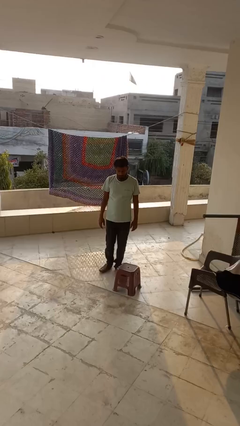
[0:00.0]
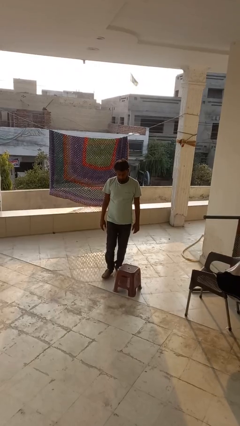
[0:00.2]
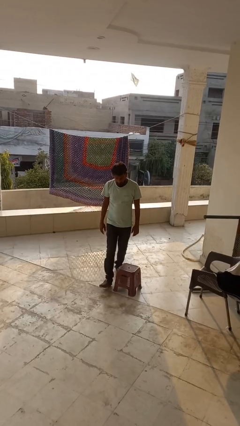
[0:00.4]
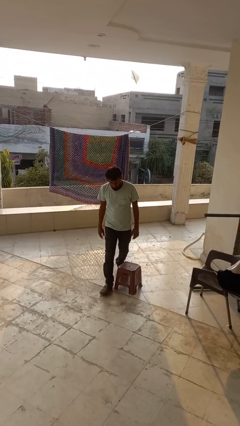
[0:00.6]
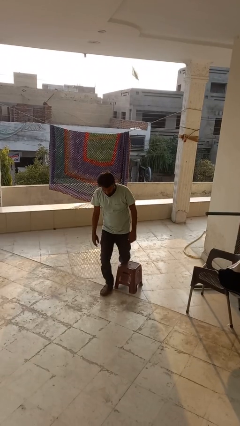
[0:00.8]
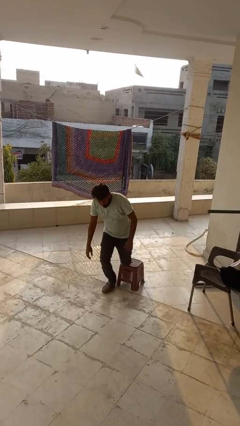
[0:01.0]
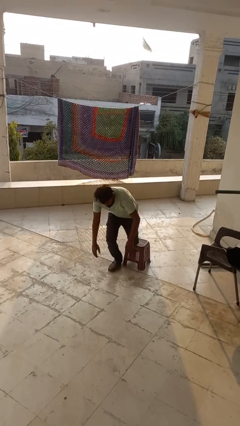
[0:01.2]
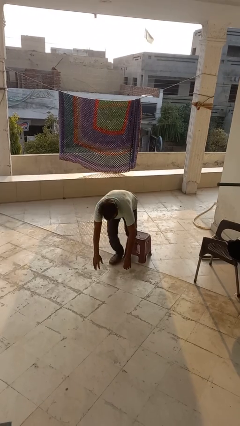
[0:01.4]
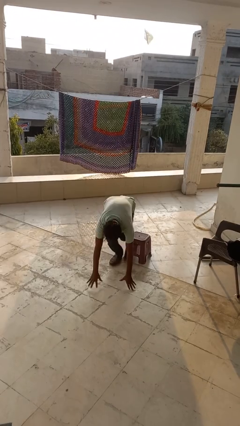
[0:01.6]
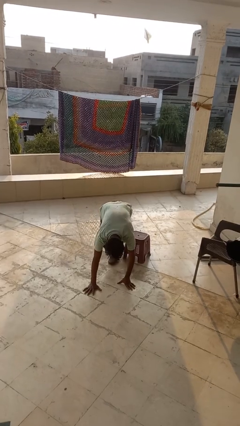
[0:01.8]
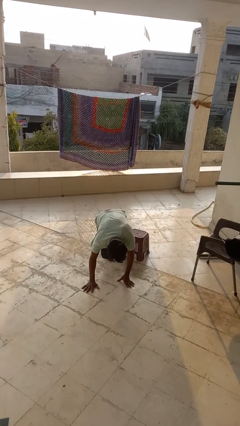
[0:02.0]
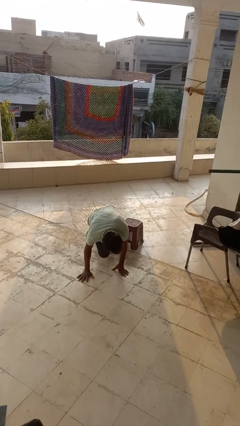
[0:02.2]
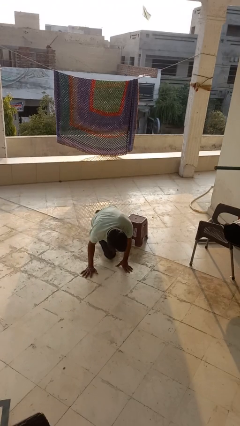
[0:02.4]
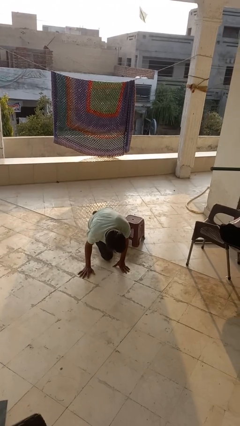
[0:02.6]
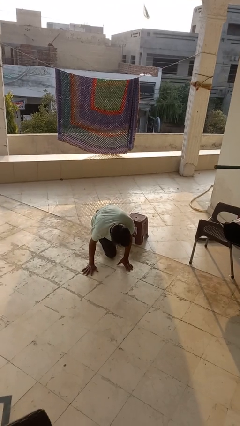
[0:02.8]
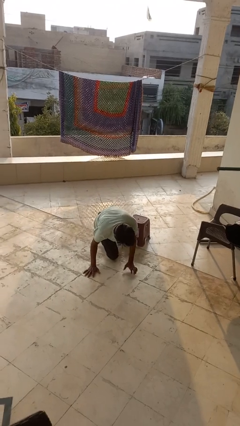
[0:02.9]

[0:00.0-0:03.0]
person trips on object on floor

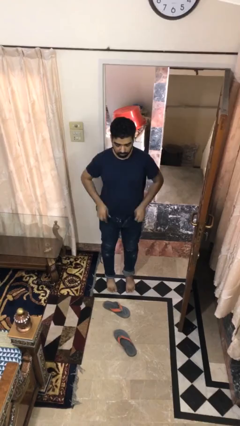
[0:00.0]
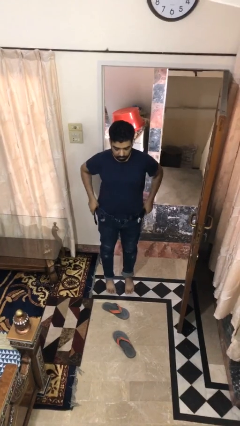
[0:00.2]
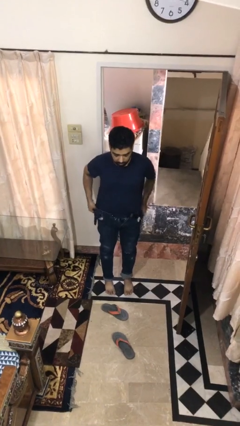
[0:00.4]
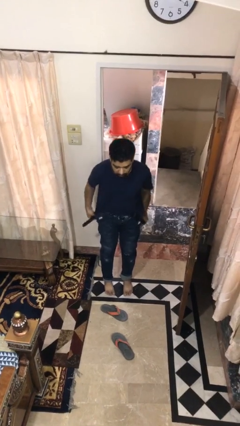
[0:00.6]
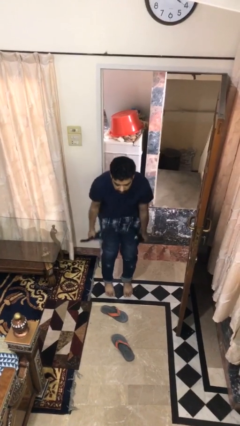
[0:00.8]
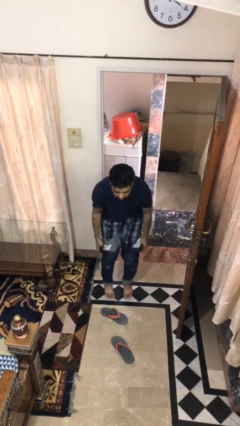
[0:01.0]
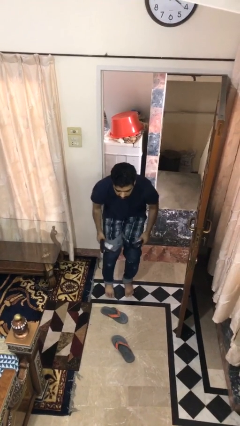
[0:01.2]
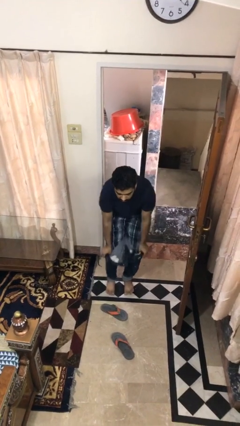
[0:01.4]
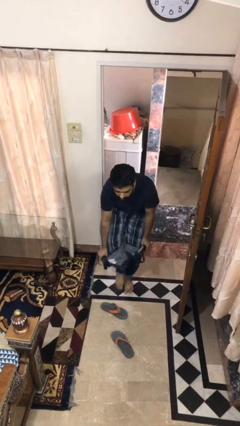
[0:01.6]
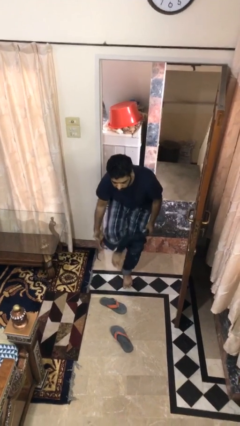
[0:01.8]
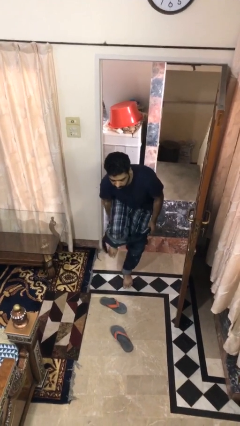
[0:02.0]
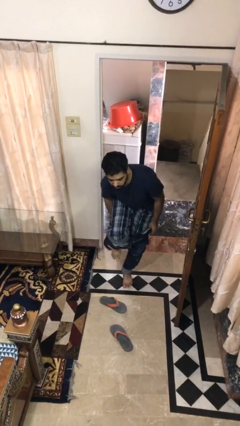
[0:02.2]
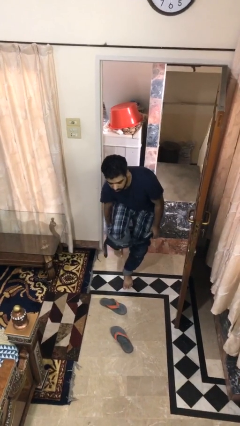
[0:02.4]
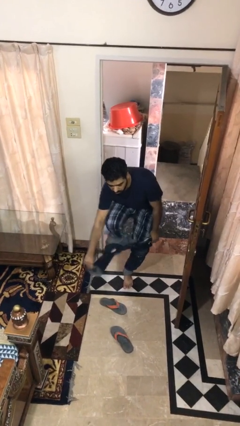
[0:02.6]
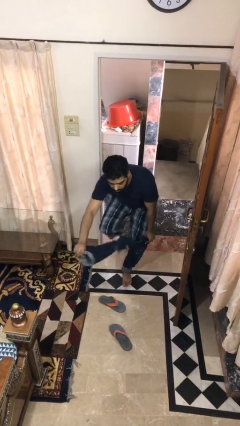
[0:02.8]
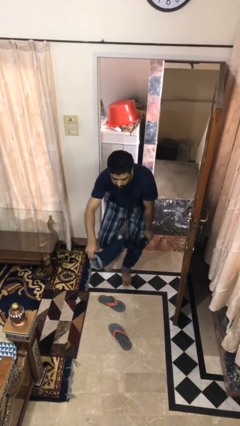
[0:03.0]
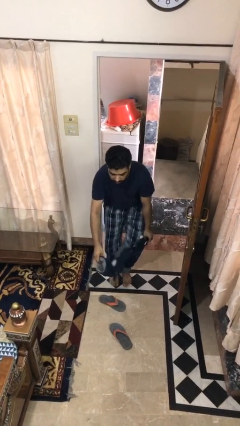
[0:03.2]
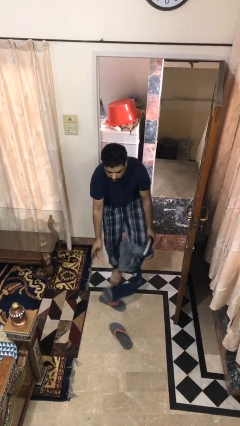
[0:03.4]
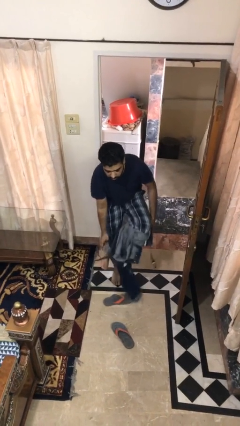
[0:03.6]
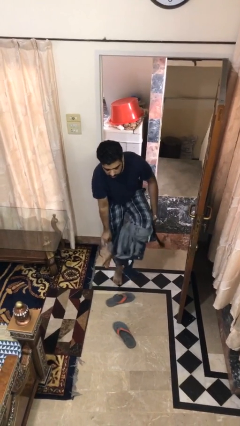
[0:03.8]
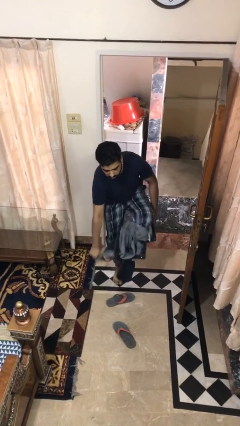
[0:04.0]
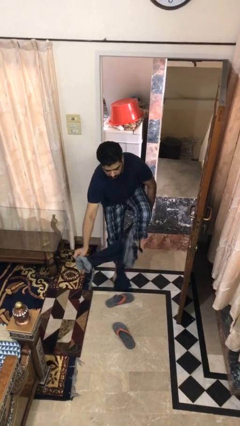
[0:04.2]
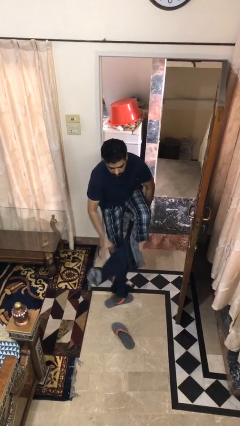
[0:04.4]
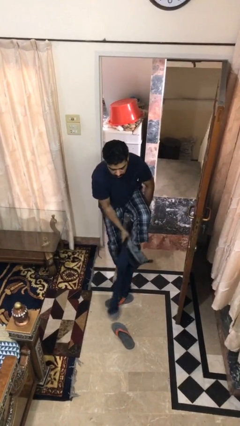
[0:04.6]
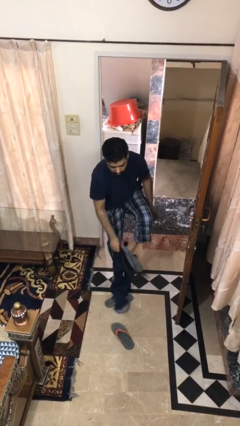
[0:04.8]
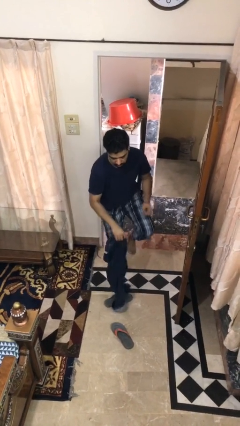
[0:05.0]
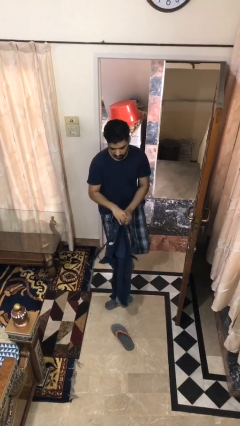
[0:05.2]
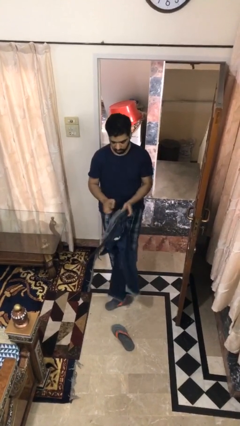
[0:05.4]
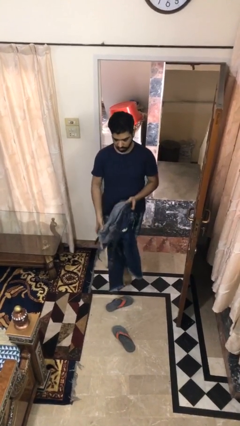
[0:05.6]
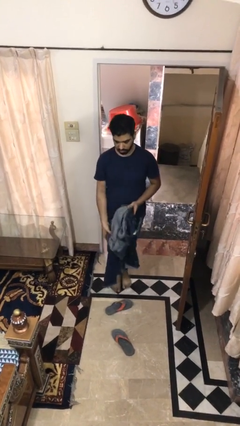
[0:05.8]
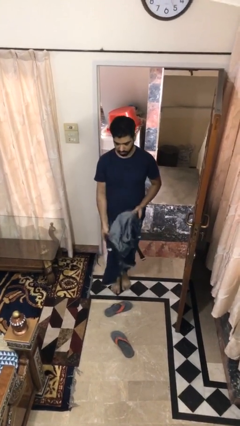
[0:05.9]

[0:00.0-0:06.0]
person takes off pants

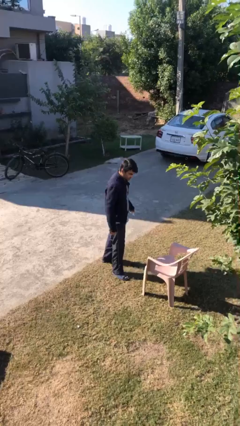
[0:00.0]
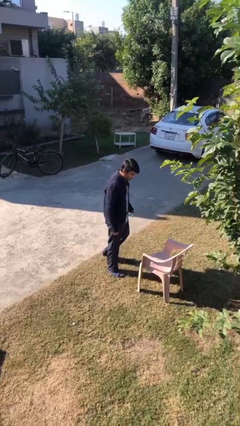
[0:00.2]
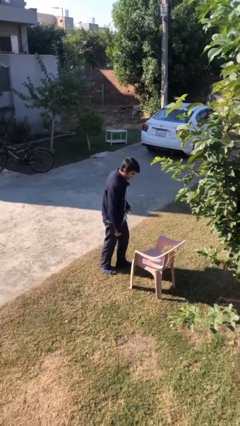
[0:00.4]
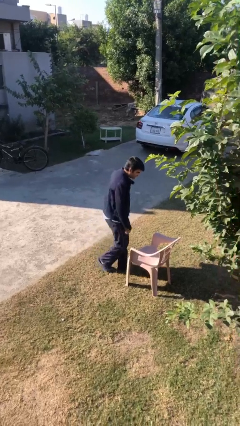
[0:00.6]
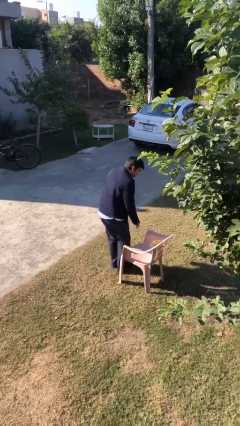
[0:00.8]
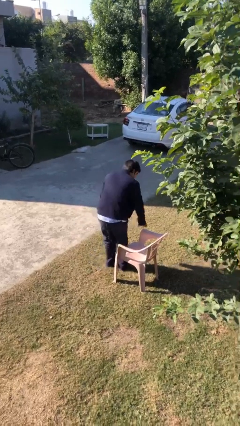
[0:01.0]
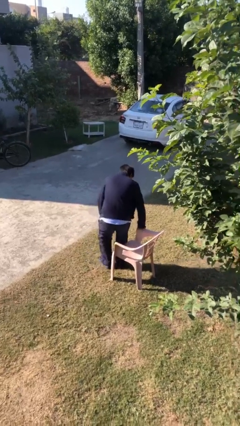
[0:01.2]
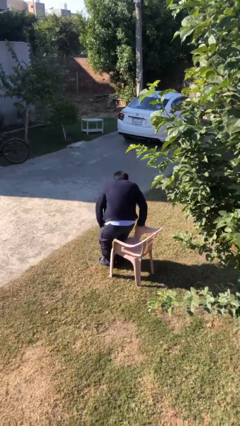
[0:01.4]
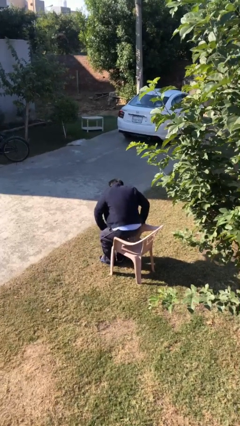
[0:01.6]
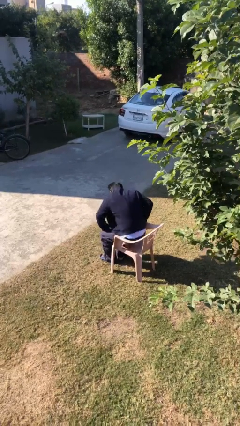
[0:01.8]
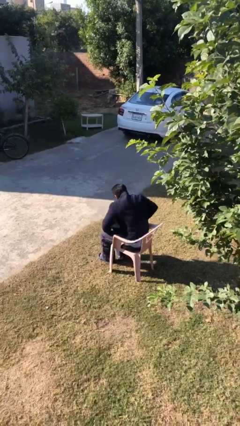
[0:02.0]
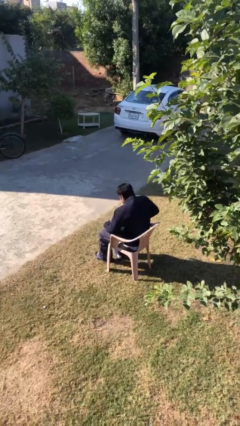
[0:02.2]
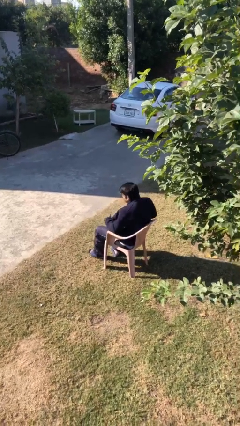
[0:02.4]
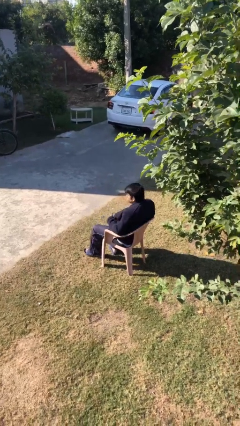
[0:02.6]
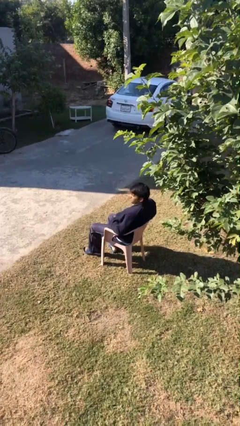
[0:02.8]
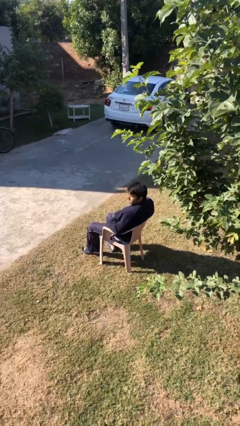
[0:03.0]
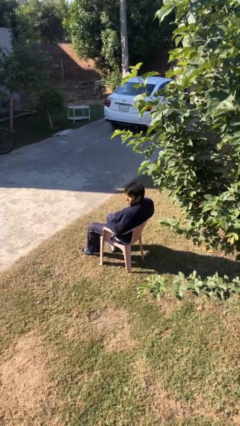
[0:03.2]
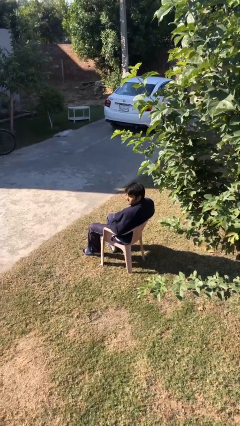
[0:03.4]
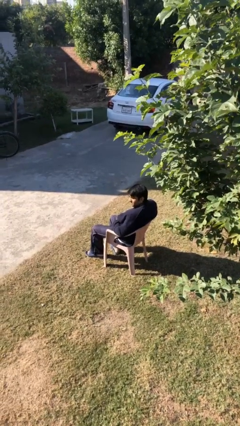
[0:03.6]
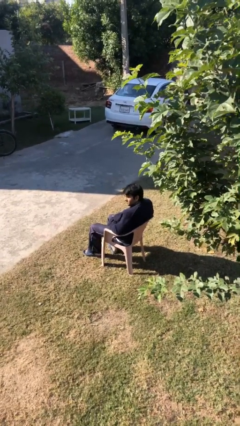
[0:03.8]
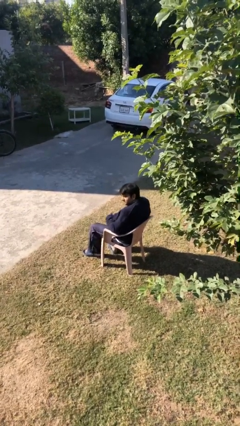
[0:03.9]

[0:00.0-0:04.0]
person sits down

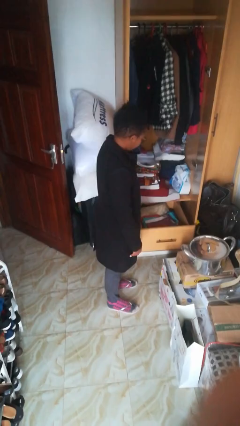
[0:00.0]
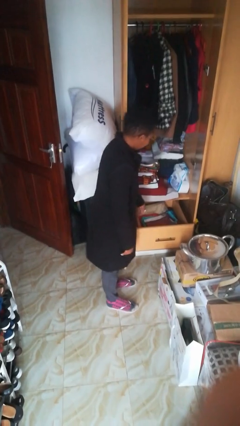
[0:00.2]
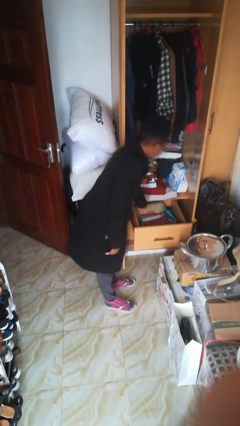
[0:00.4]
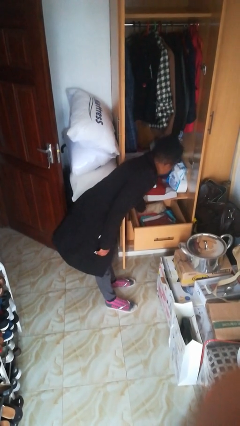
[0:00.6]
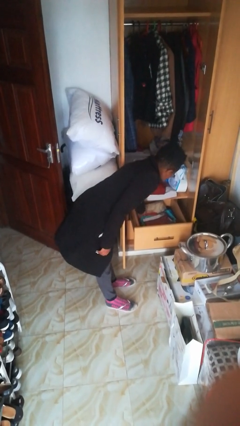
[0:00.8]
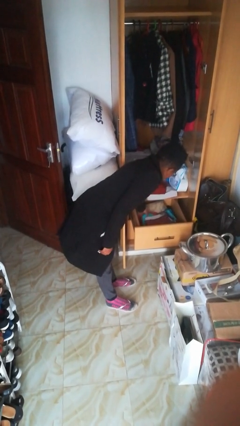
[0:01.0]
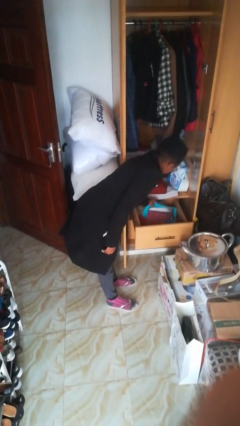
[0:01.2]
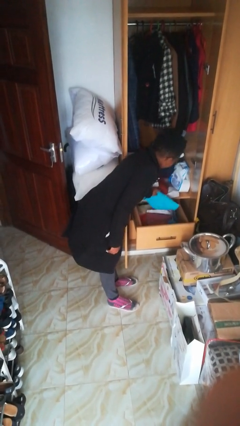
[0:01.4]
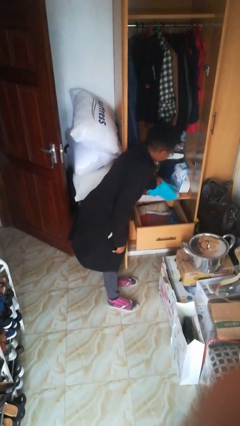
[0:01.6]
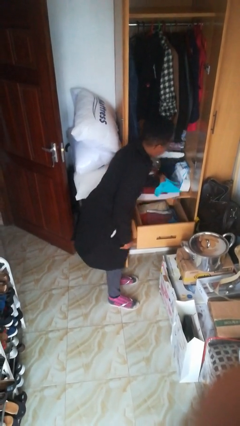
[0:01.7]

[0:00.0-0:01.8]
person takes clothes from dresser

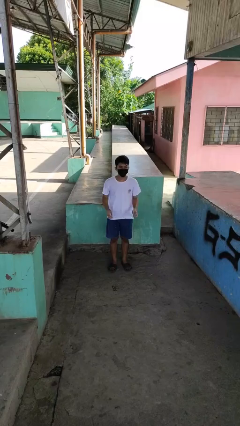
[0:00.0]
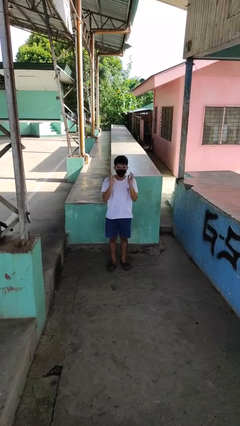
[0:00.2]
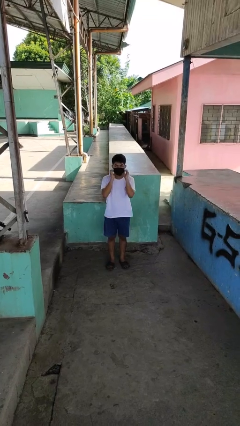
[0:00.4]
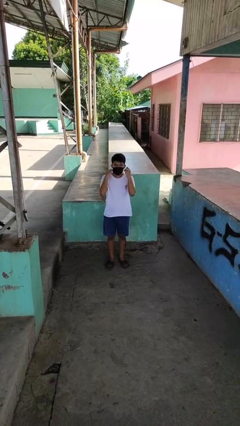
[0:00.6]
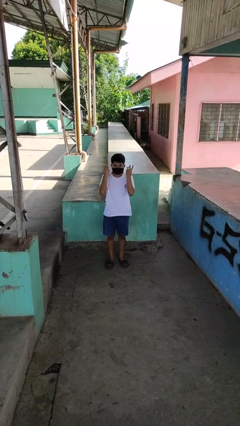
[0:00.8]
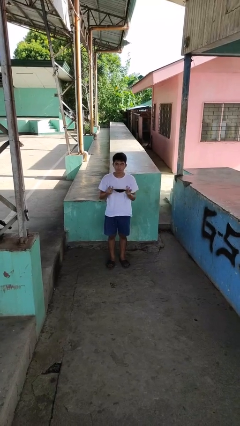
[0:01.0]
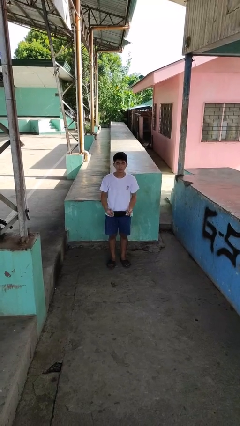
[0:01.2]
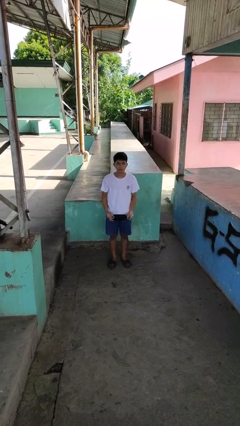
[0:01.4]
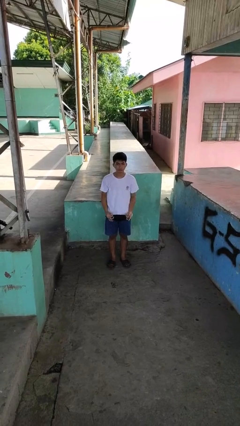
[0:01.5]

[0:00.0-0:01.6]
person takes off facemask

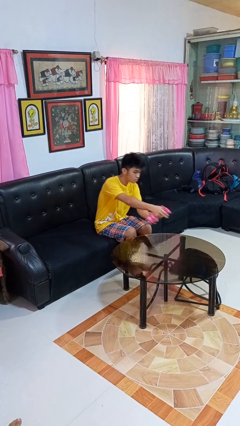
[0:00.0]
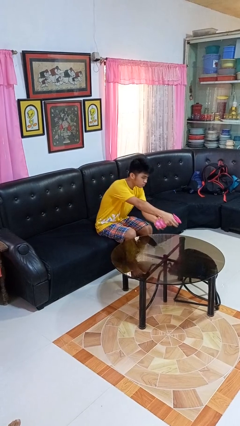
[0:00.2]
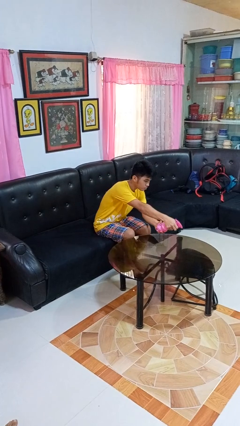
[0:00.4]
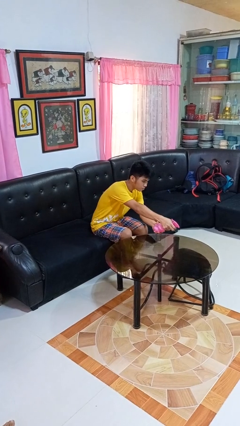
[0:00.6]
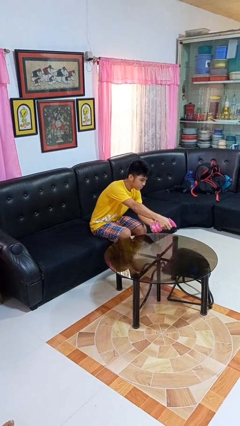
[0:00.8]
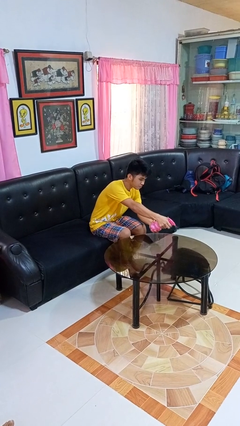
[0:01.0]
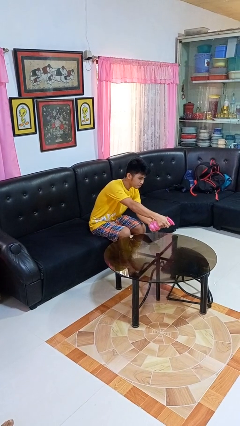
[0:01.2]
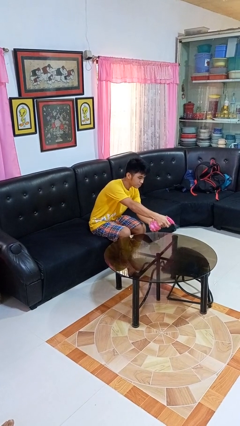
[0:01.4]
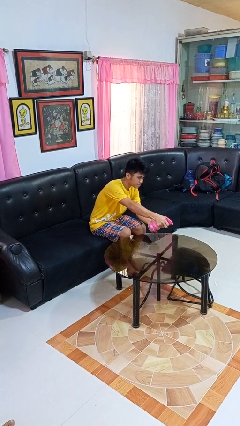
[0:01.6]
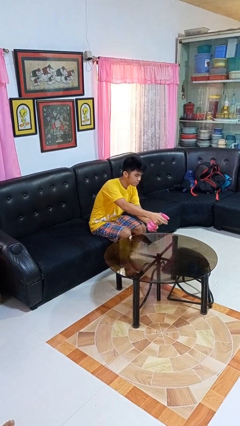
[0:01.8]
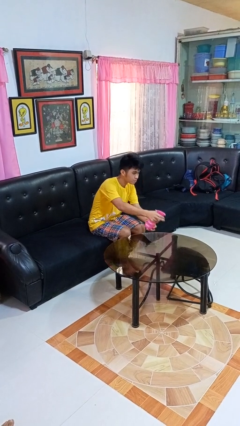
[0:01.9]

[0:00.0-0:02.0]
person sprays from bottle
